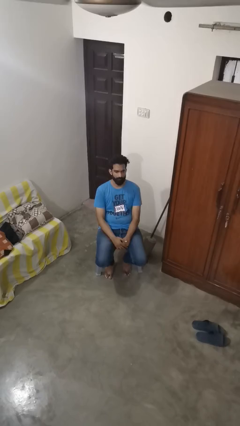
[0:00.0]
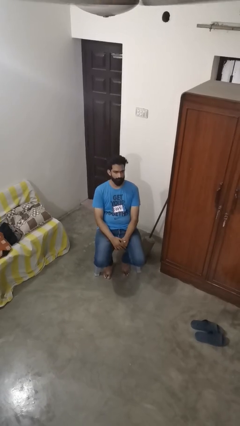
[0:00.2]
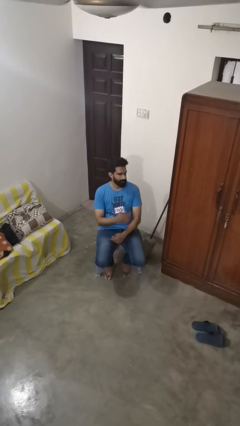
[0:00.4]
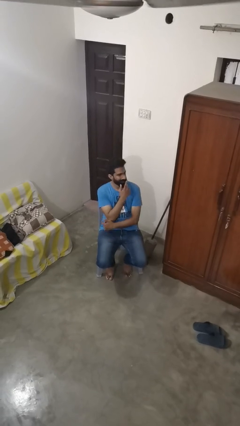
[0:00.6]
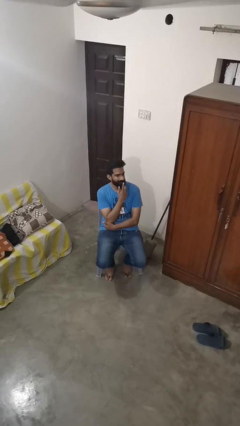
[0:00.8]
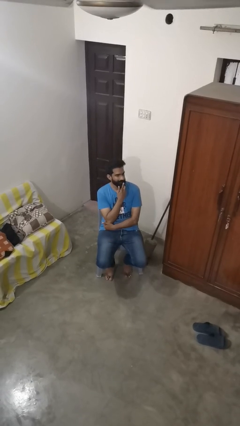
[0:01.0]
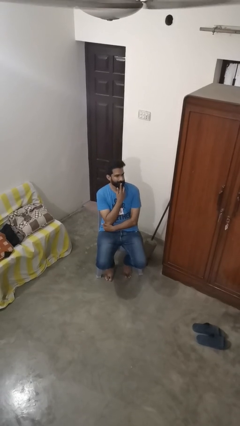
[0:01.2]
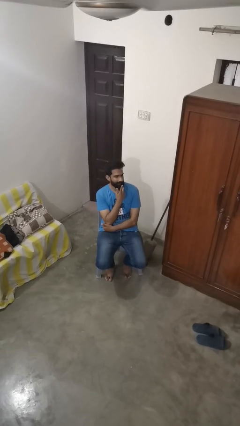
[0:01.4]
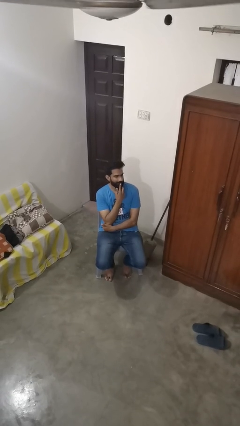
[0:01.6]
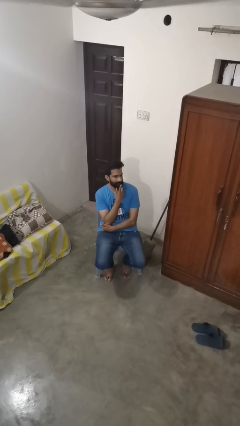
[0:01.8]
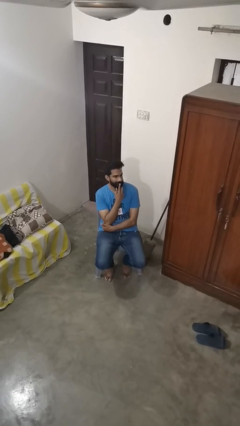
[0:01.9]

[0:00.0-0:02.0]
person strokes chin

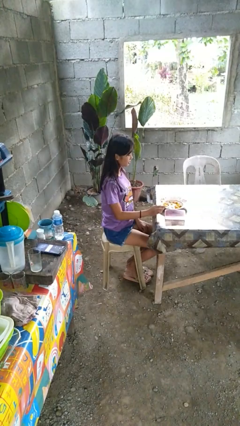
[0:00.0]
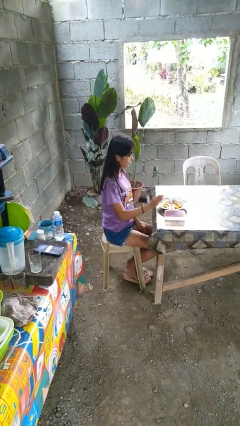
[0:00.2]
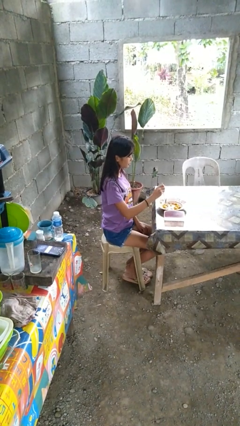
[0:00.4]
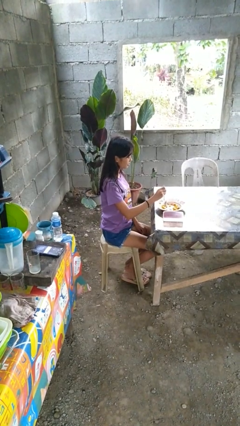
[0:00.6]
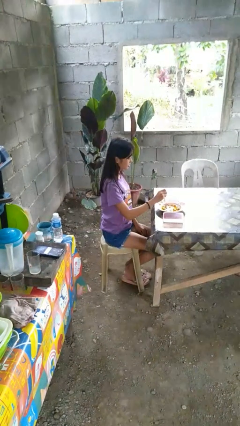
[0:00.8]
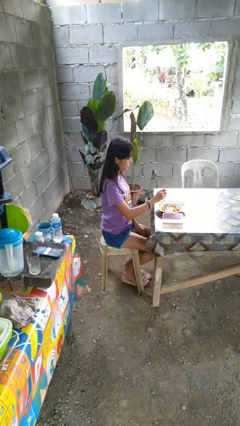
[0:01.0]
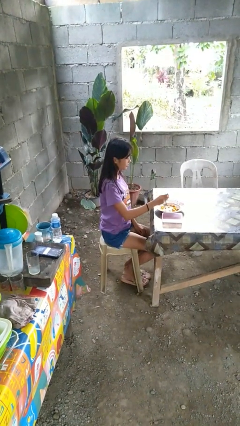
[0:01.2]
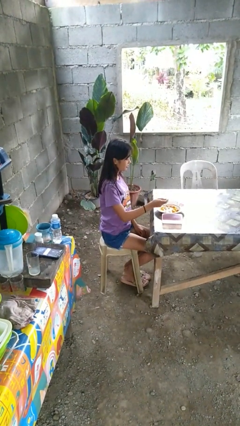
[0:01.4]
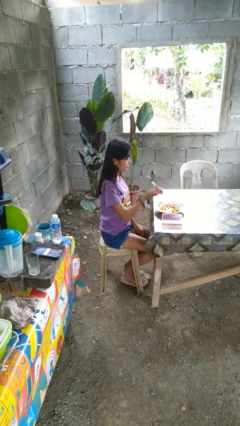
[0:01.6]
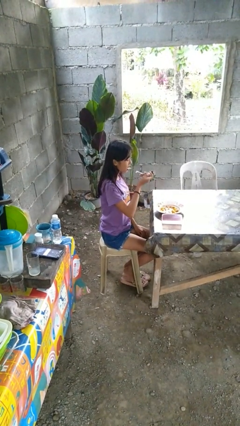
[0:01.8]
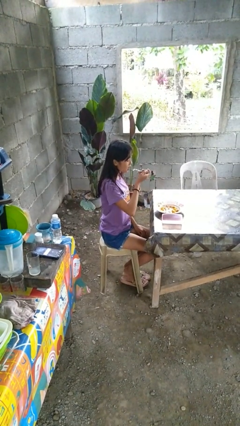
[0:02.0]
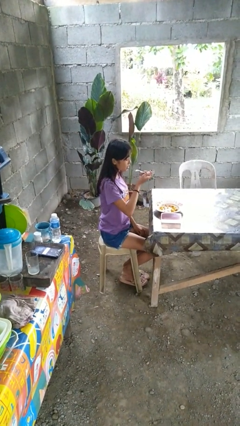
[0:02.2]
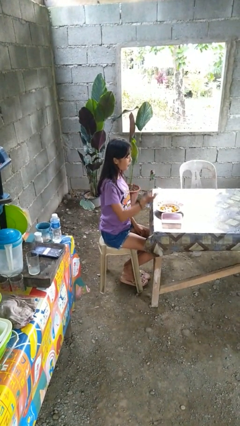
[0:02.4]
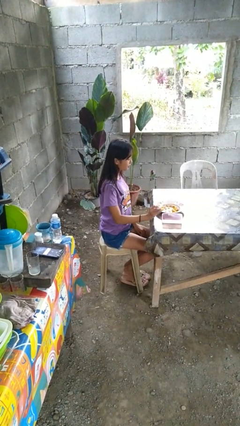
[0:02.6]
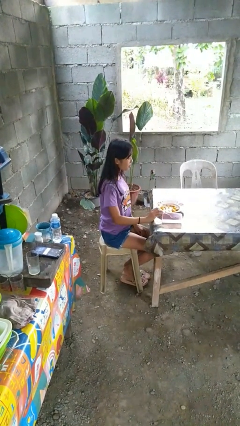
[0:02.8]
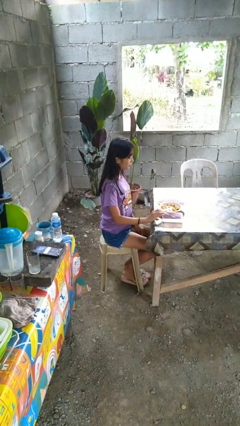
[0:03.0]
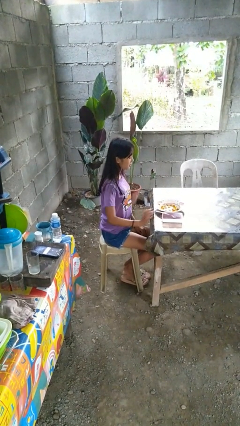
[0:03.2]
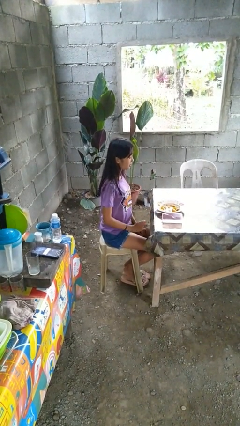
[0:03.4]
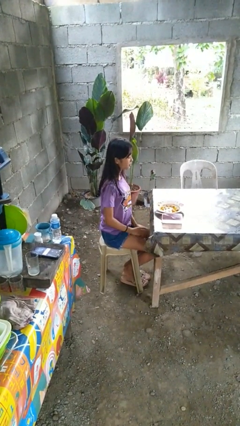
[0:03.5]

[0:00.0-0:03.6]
person eats with utensil

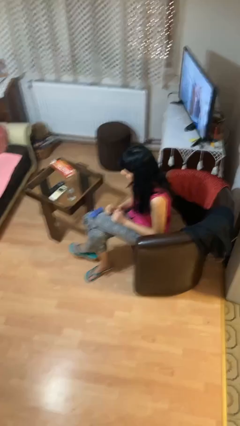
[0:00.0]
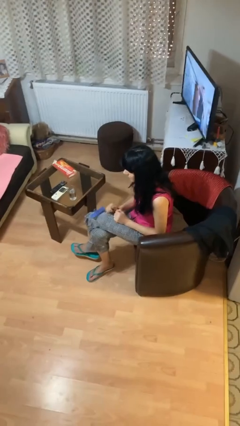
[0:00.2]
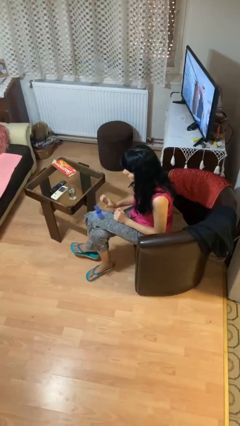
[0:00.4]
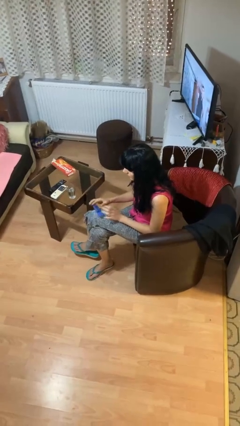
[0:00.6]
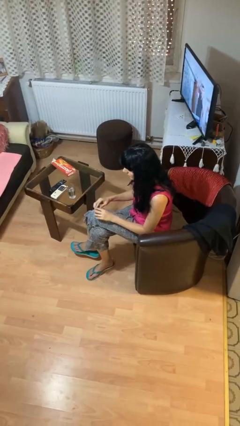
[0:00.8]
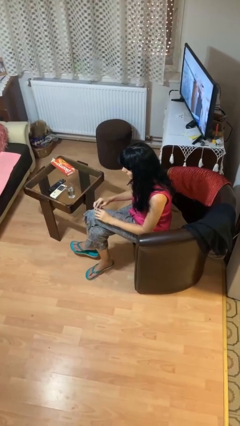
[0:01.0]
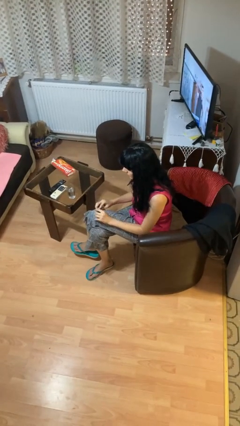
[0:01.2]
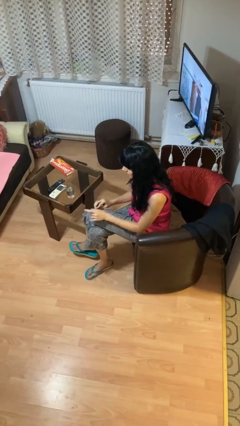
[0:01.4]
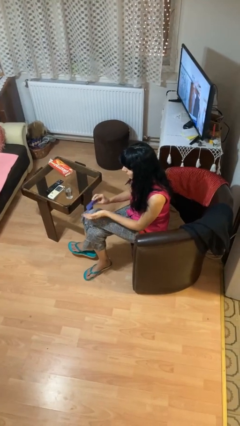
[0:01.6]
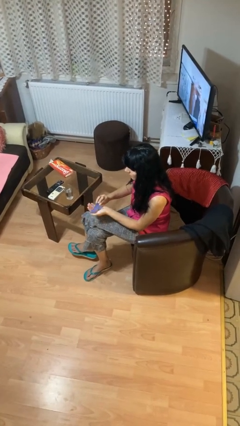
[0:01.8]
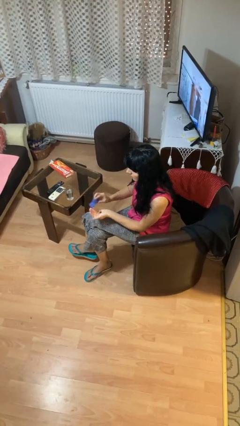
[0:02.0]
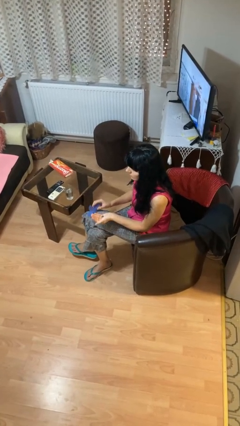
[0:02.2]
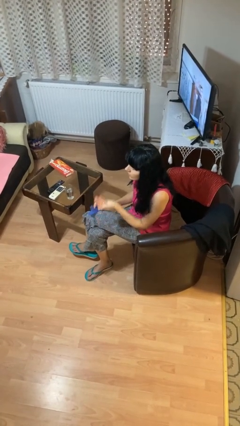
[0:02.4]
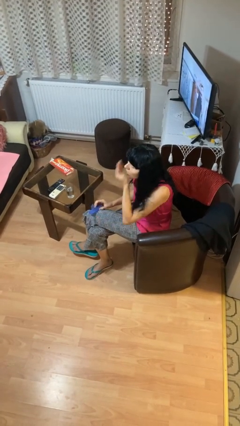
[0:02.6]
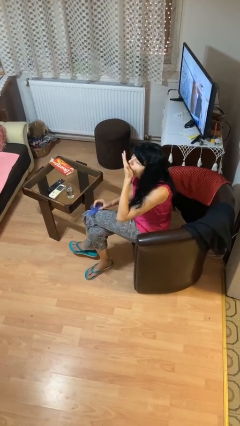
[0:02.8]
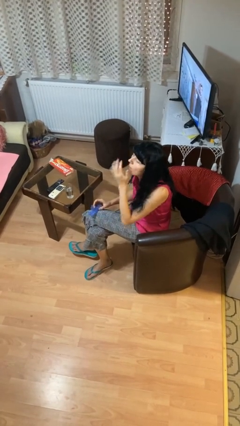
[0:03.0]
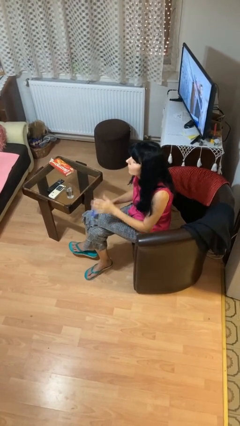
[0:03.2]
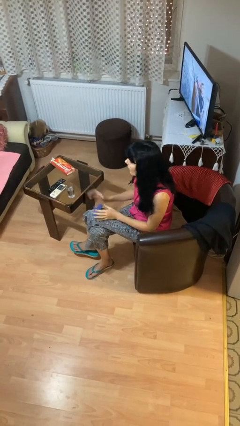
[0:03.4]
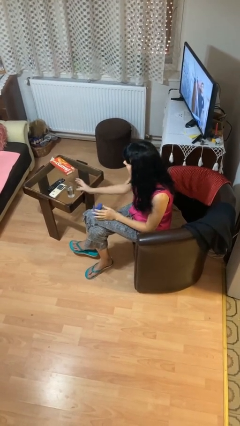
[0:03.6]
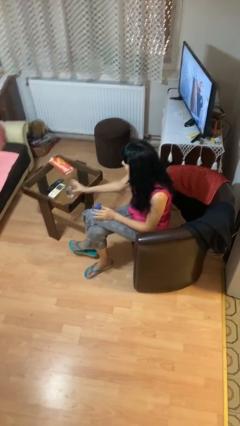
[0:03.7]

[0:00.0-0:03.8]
person takes medicine pills

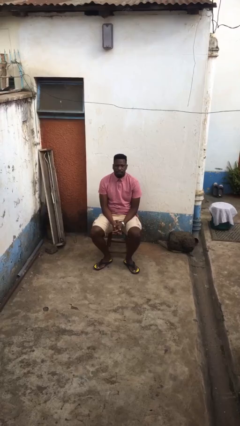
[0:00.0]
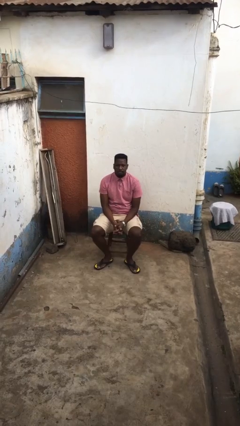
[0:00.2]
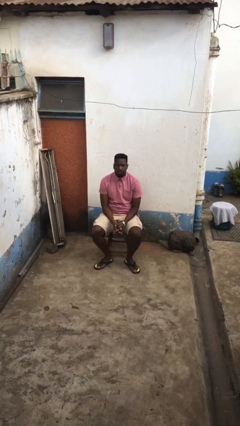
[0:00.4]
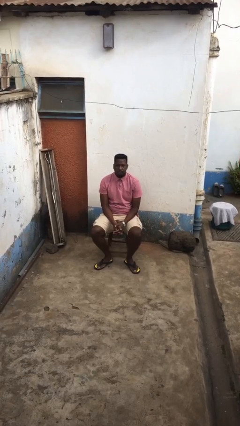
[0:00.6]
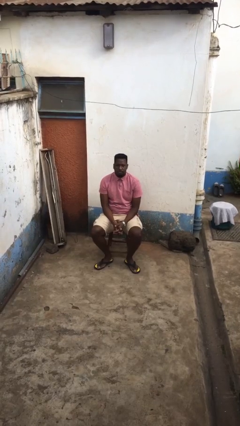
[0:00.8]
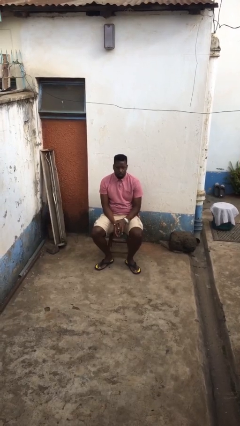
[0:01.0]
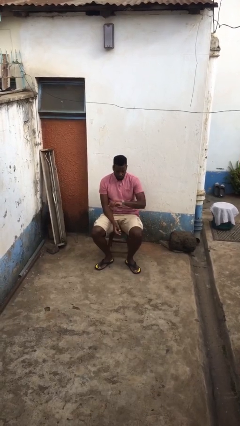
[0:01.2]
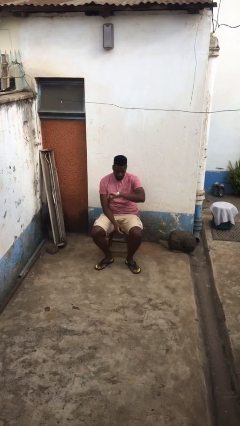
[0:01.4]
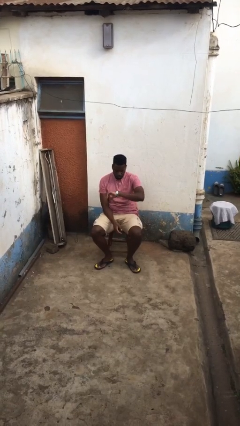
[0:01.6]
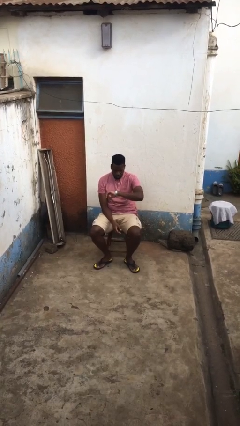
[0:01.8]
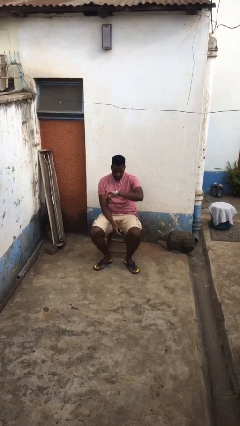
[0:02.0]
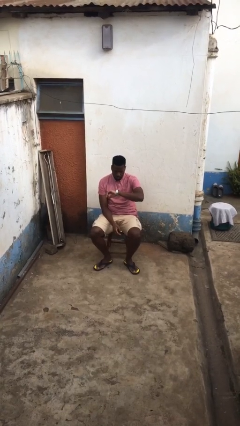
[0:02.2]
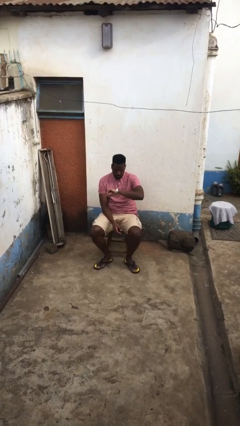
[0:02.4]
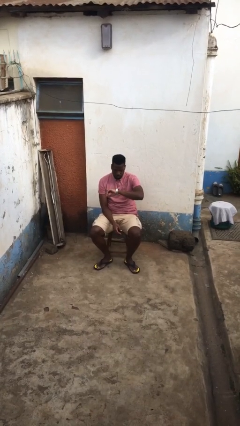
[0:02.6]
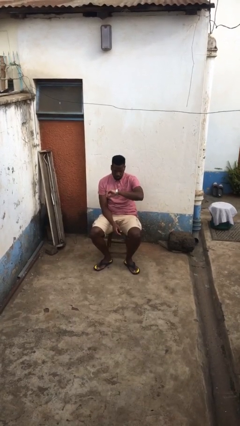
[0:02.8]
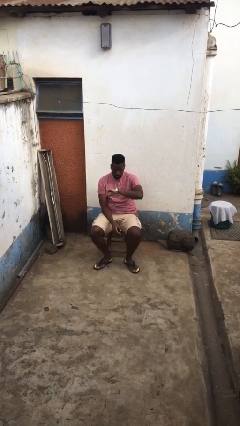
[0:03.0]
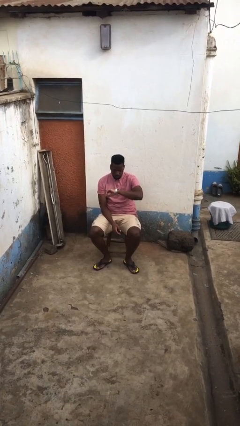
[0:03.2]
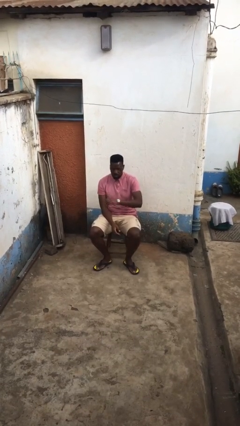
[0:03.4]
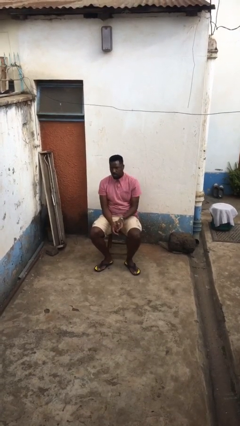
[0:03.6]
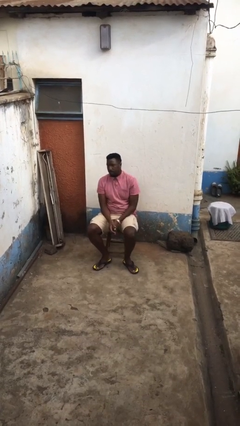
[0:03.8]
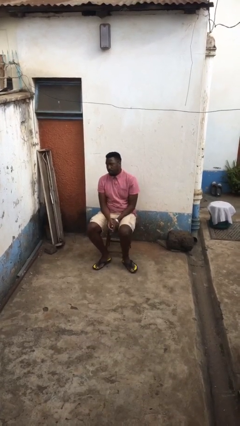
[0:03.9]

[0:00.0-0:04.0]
person looks at wristwatch

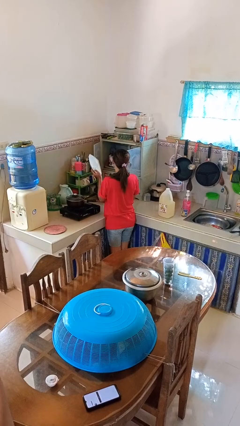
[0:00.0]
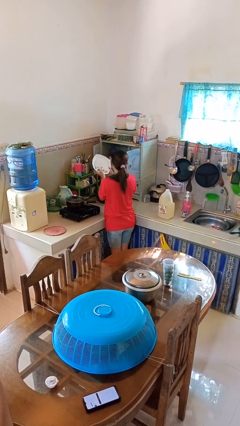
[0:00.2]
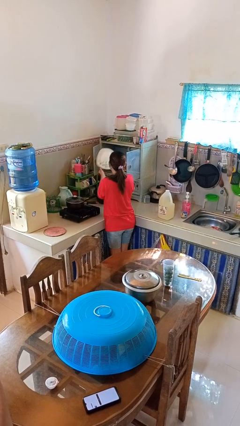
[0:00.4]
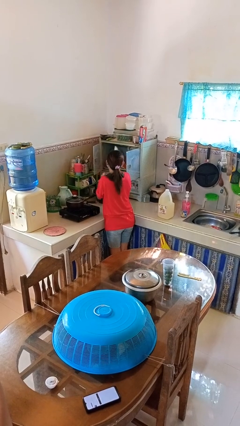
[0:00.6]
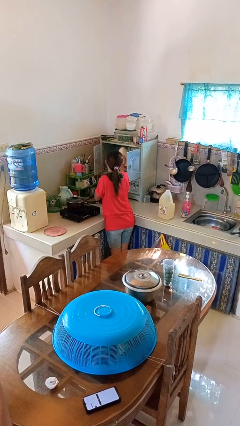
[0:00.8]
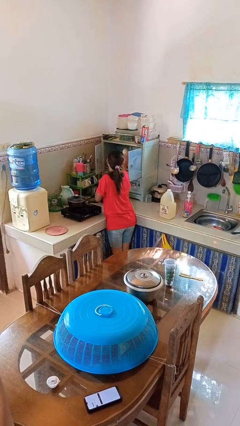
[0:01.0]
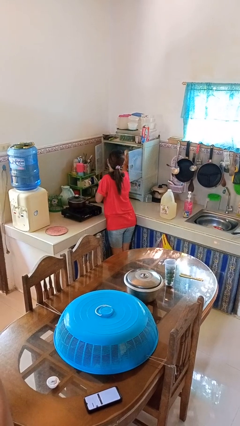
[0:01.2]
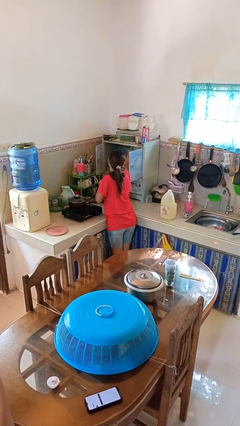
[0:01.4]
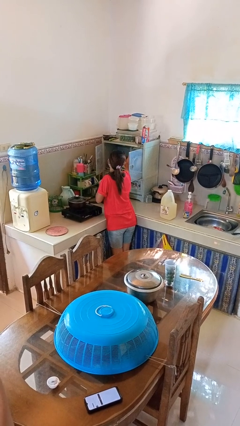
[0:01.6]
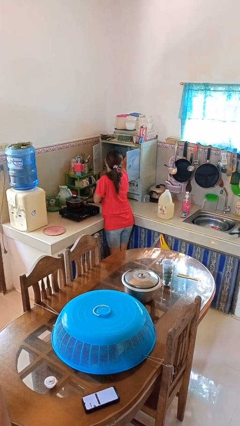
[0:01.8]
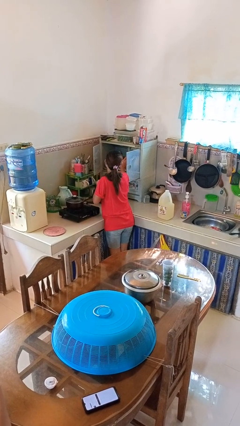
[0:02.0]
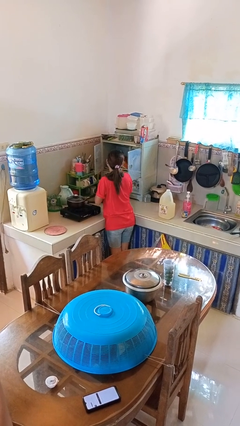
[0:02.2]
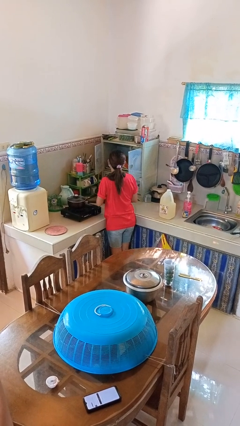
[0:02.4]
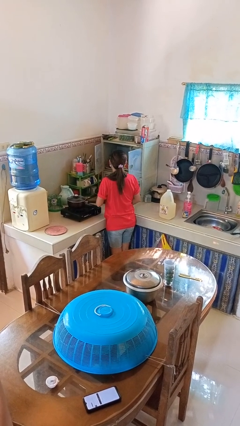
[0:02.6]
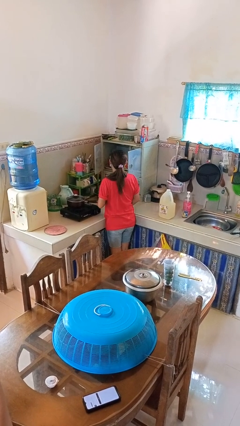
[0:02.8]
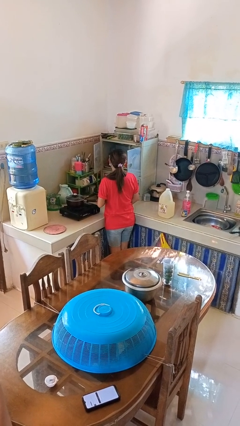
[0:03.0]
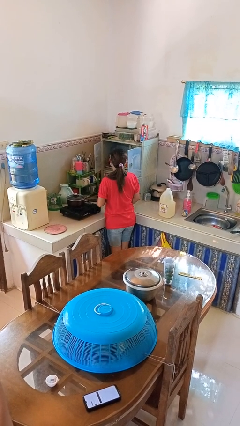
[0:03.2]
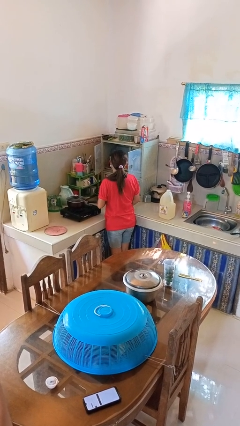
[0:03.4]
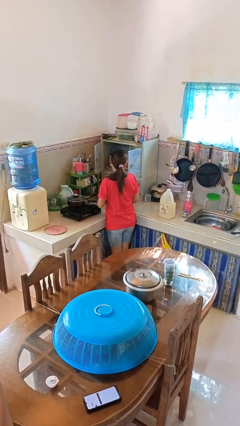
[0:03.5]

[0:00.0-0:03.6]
person puts object in cabinet

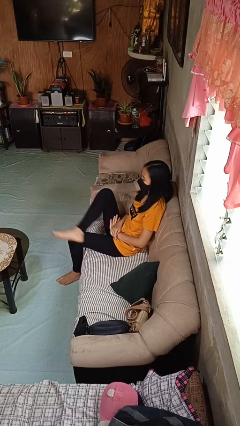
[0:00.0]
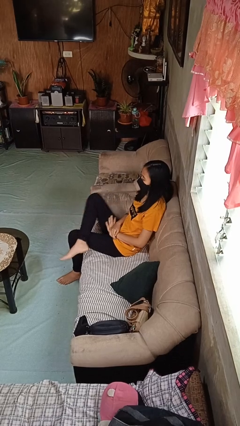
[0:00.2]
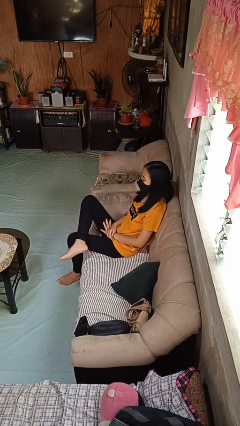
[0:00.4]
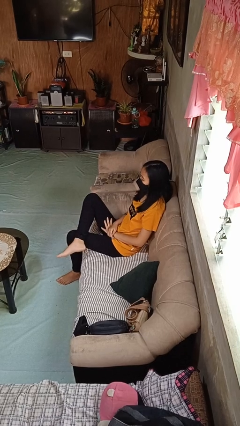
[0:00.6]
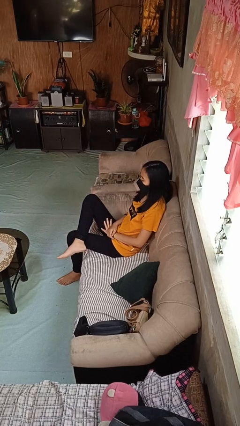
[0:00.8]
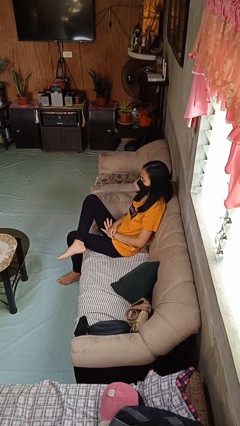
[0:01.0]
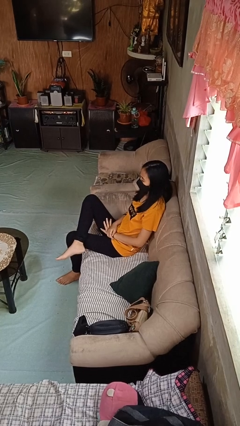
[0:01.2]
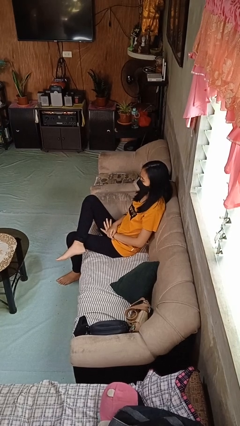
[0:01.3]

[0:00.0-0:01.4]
person crosses legs
